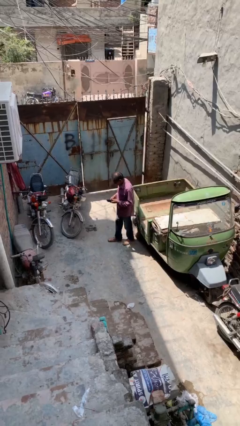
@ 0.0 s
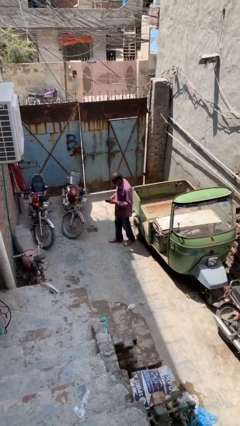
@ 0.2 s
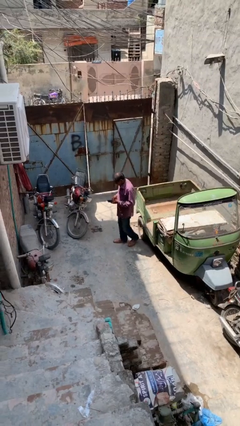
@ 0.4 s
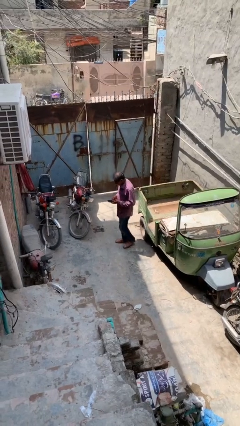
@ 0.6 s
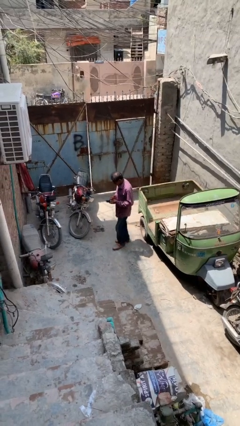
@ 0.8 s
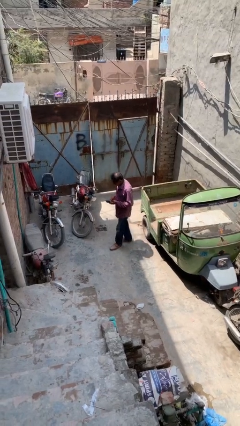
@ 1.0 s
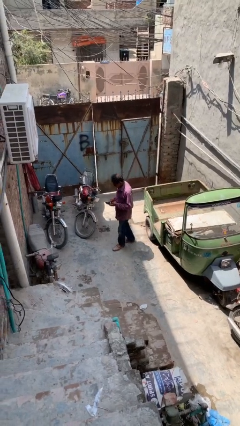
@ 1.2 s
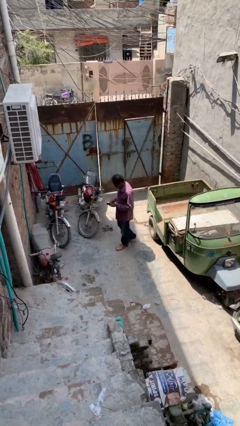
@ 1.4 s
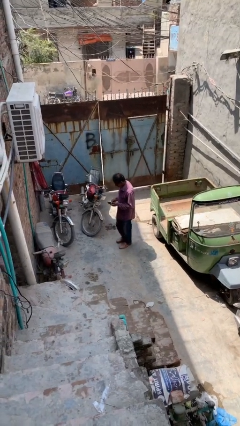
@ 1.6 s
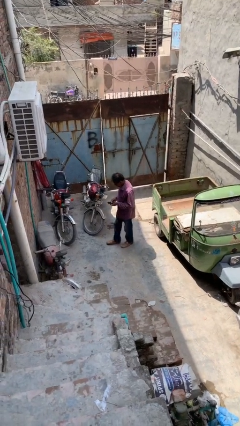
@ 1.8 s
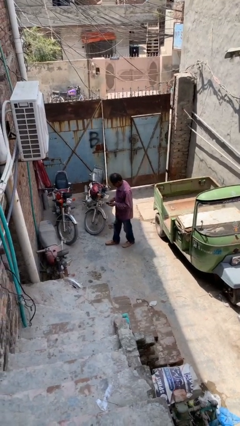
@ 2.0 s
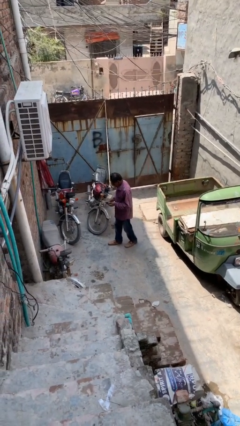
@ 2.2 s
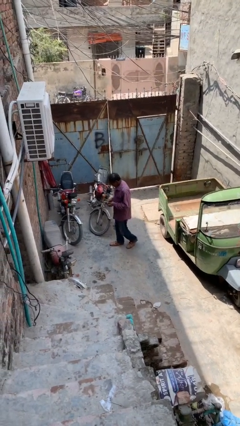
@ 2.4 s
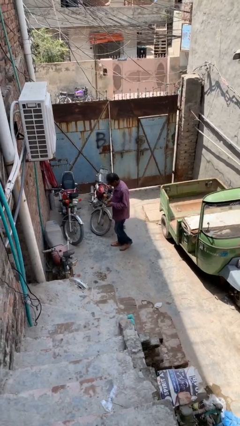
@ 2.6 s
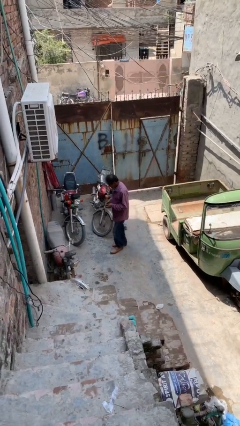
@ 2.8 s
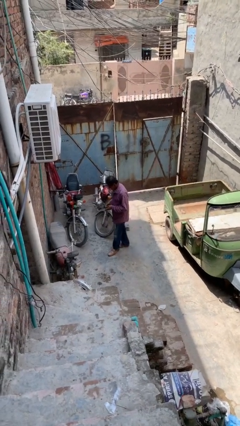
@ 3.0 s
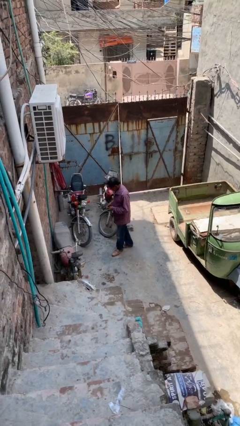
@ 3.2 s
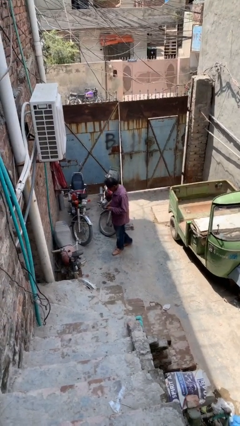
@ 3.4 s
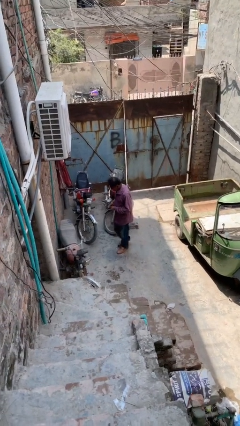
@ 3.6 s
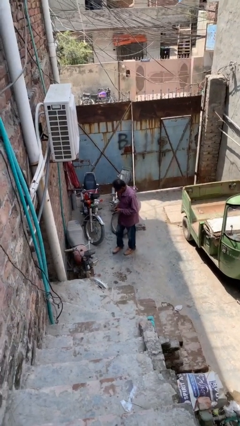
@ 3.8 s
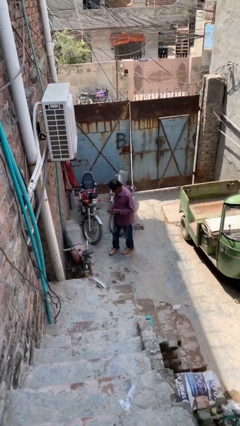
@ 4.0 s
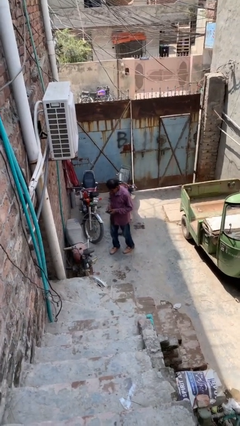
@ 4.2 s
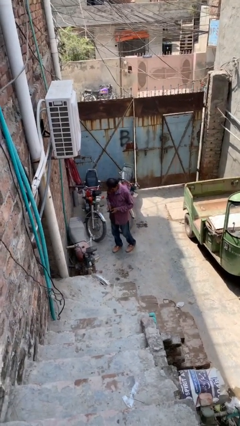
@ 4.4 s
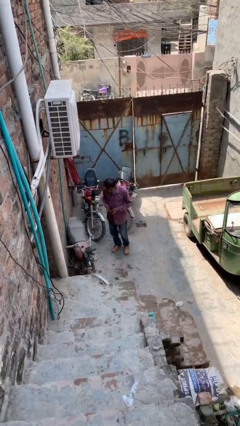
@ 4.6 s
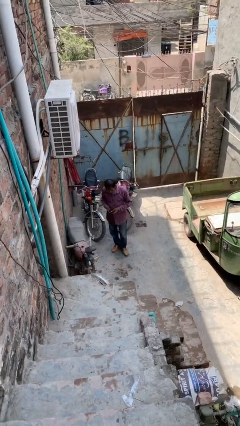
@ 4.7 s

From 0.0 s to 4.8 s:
person texts on phone

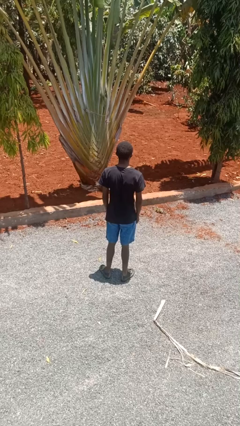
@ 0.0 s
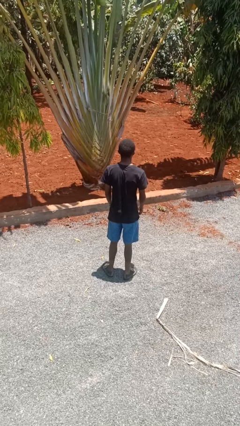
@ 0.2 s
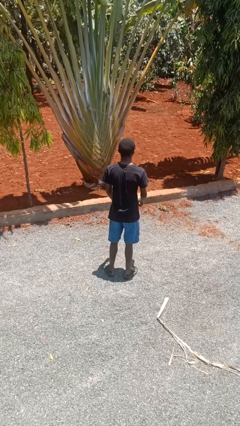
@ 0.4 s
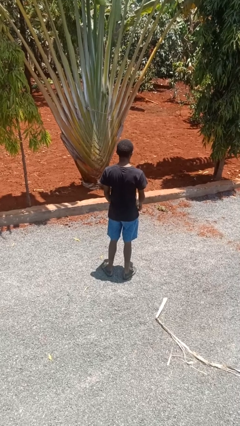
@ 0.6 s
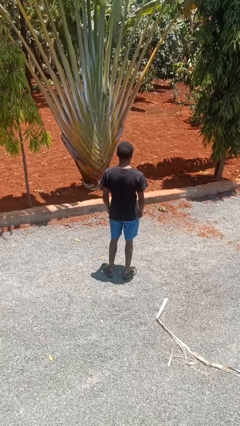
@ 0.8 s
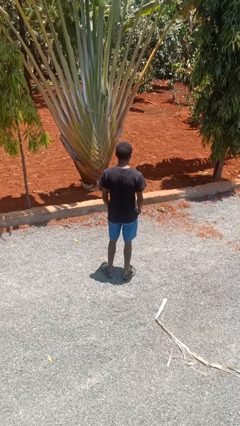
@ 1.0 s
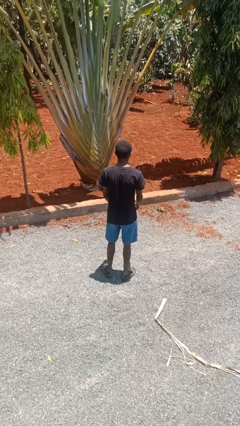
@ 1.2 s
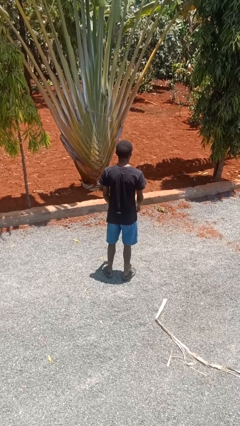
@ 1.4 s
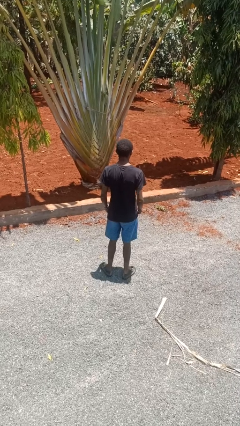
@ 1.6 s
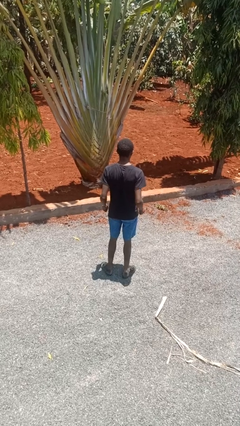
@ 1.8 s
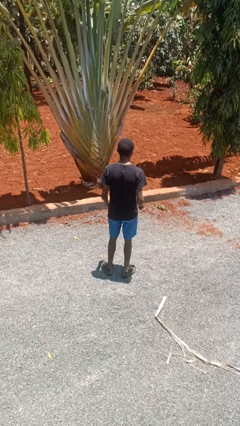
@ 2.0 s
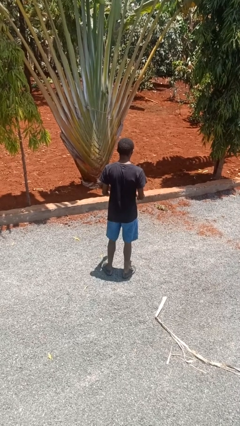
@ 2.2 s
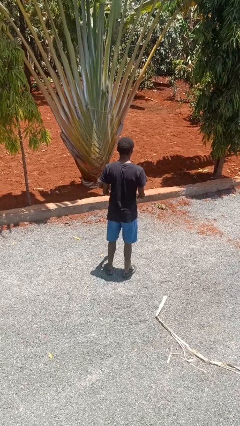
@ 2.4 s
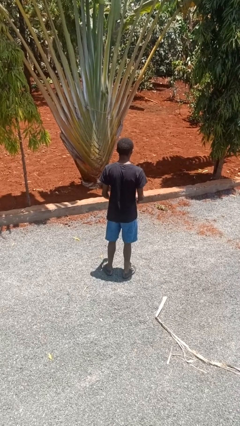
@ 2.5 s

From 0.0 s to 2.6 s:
person wiggles hips

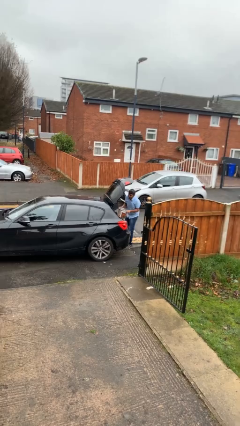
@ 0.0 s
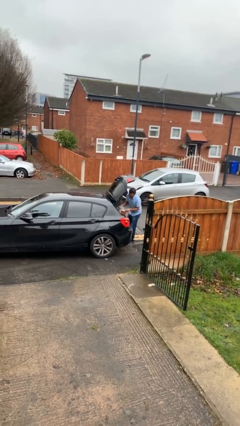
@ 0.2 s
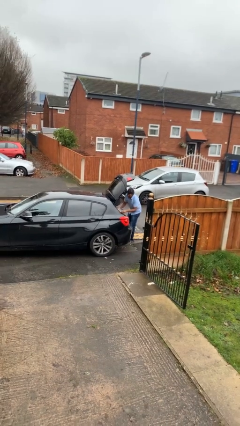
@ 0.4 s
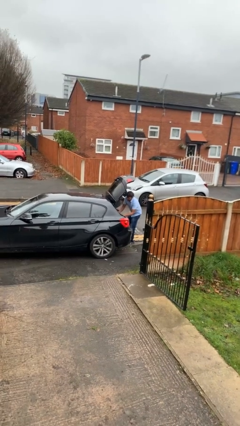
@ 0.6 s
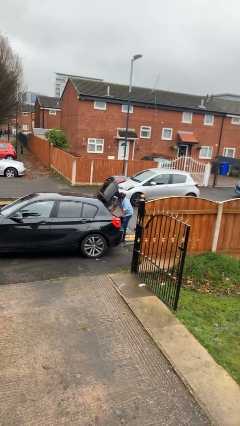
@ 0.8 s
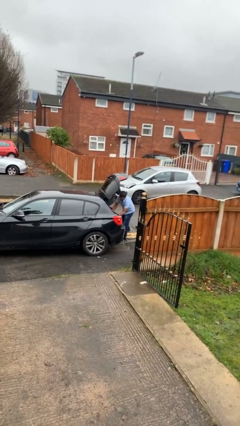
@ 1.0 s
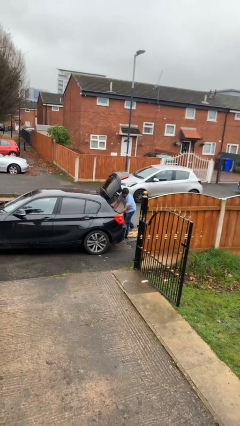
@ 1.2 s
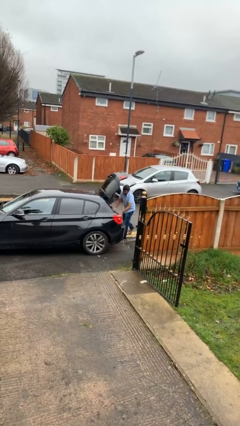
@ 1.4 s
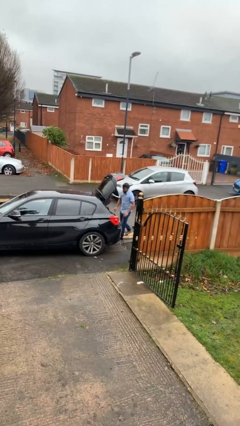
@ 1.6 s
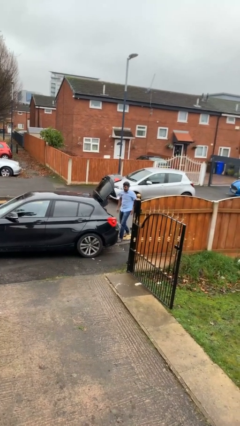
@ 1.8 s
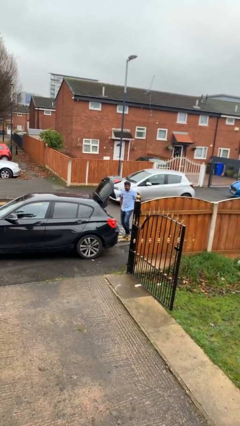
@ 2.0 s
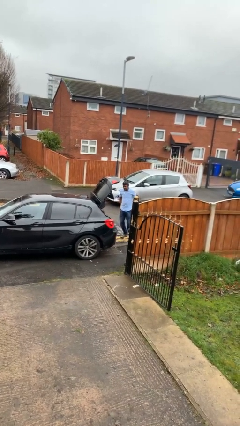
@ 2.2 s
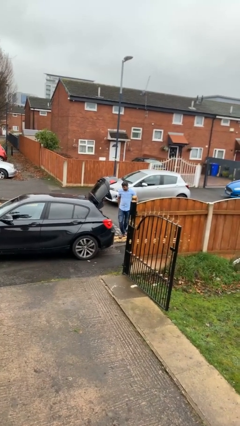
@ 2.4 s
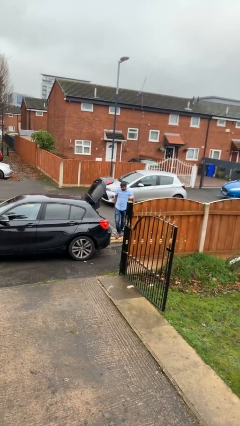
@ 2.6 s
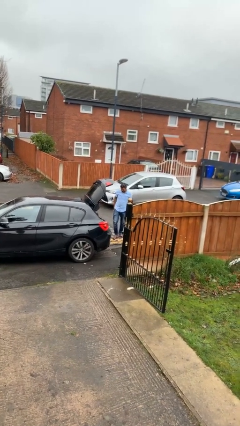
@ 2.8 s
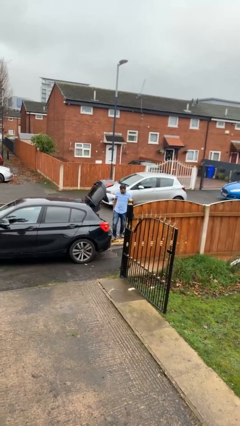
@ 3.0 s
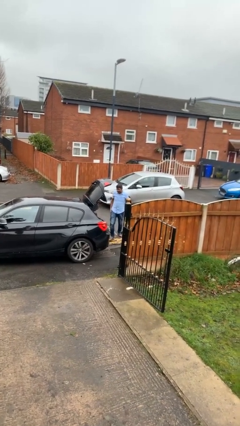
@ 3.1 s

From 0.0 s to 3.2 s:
person loads car

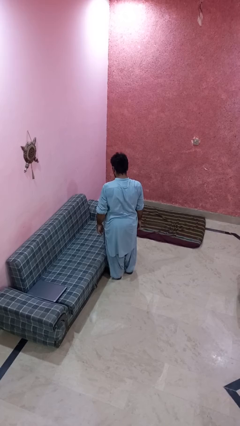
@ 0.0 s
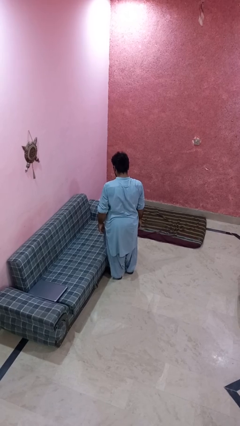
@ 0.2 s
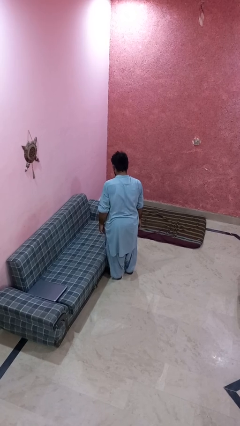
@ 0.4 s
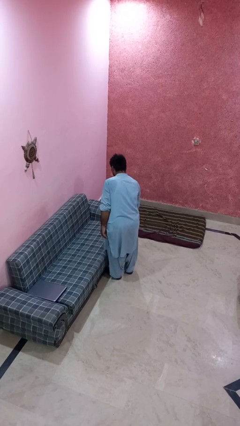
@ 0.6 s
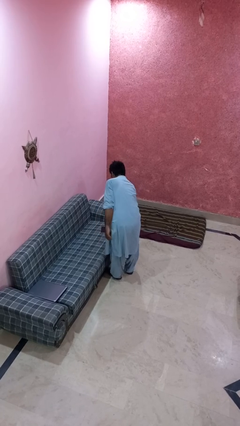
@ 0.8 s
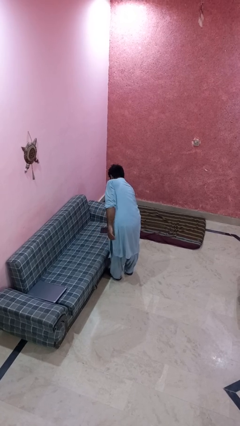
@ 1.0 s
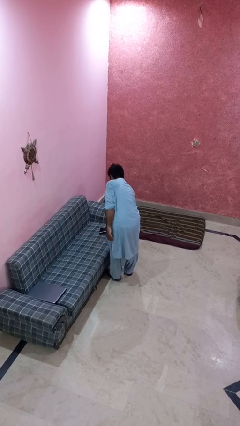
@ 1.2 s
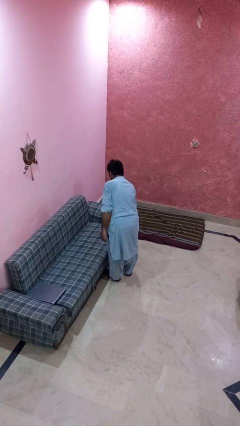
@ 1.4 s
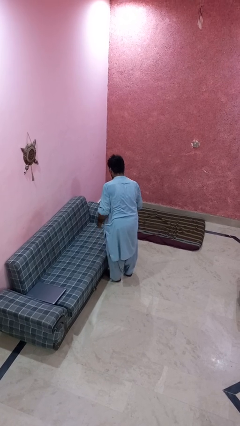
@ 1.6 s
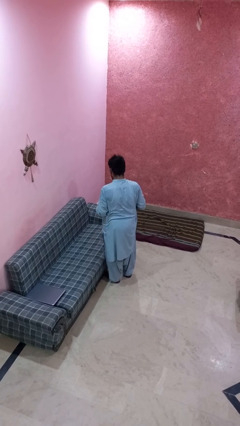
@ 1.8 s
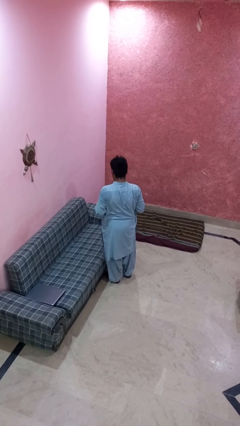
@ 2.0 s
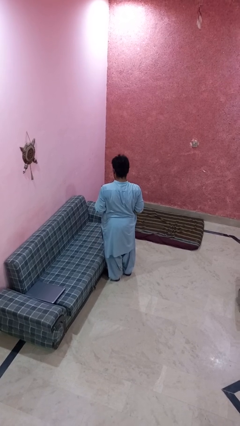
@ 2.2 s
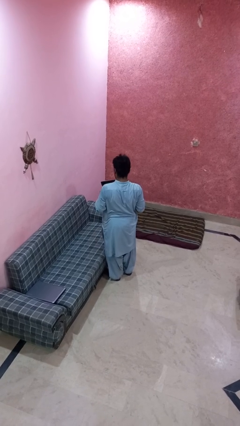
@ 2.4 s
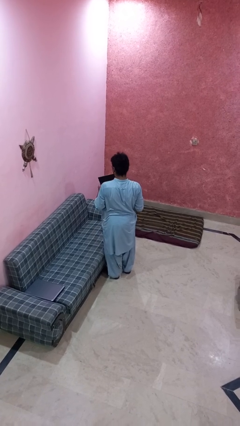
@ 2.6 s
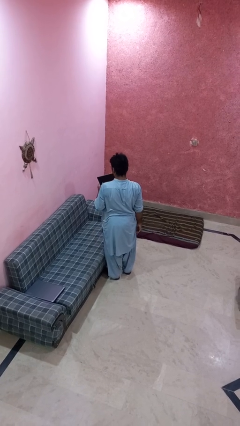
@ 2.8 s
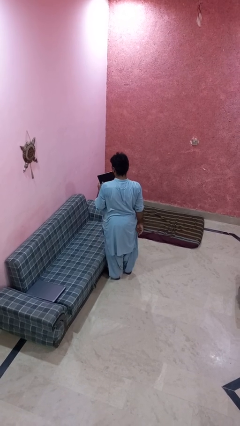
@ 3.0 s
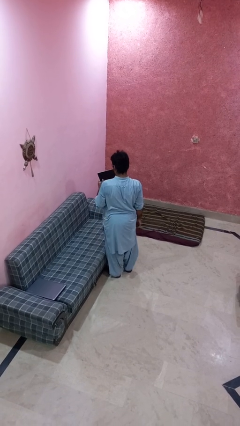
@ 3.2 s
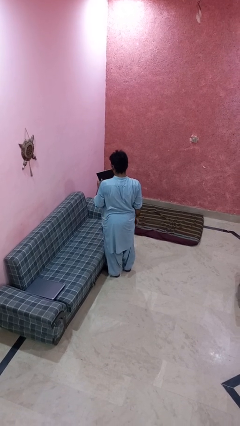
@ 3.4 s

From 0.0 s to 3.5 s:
person picks up object from couch

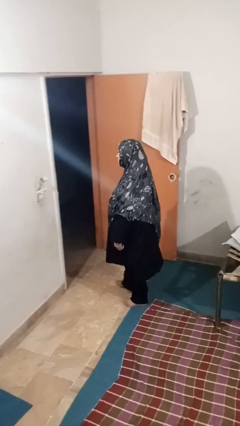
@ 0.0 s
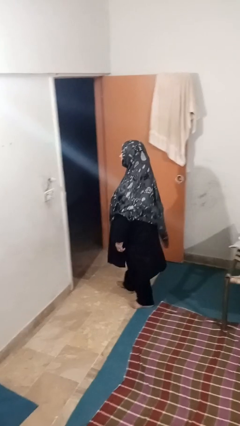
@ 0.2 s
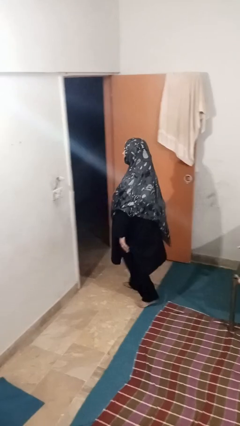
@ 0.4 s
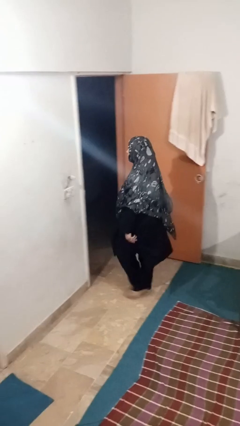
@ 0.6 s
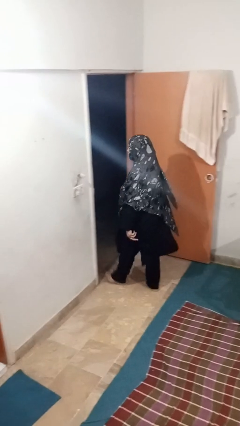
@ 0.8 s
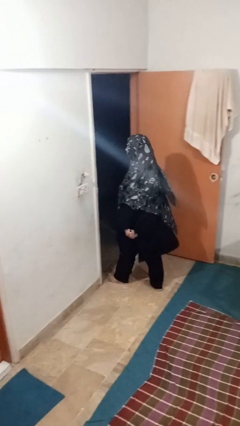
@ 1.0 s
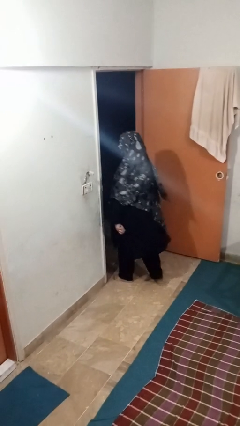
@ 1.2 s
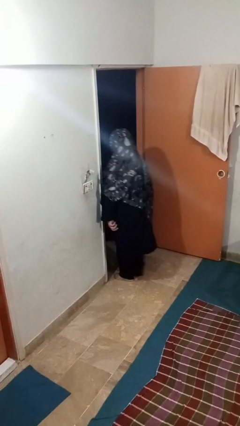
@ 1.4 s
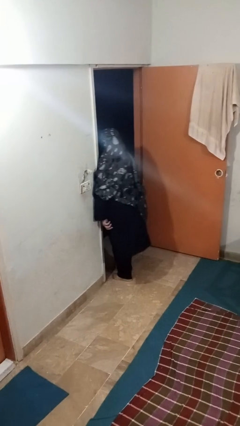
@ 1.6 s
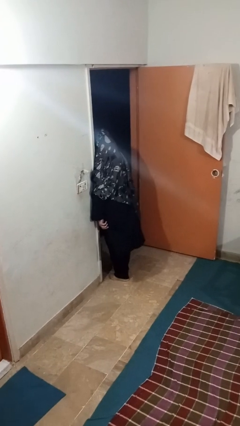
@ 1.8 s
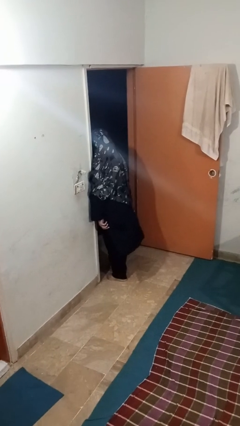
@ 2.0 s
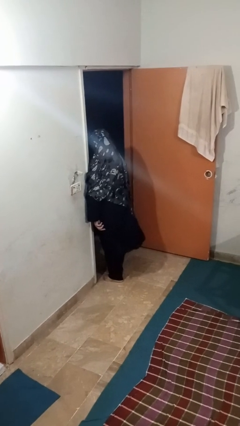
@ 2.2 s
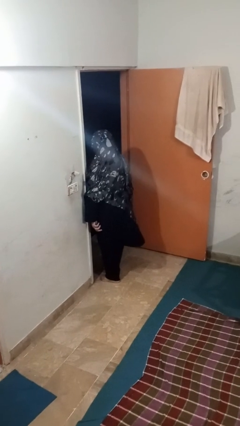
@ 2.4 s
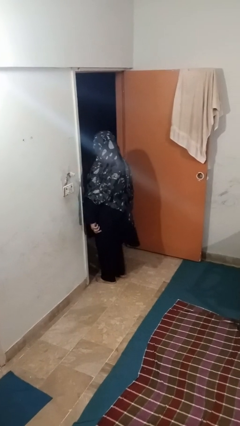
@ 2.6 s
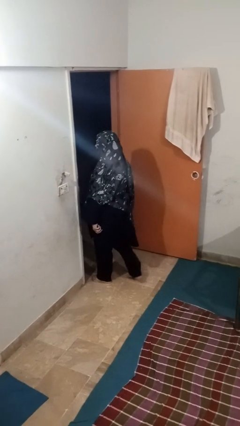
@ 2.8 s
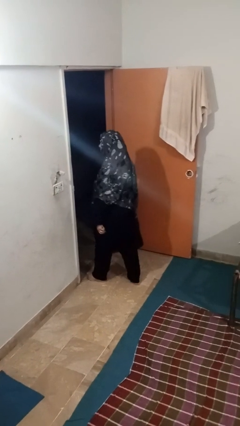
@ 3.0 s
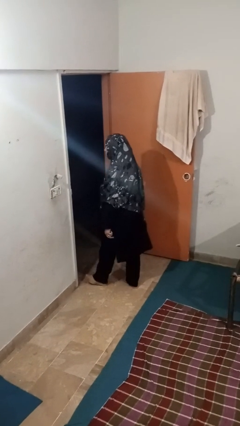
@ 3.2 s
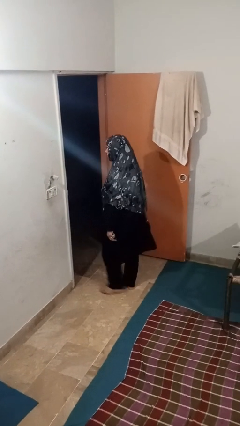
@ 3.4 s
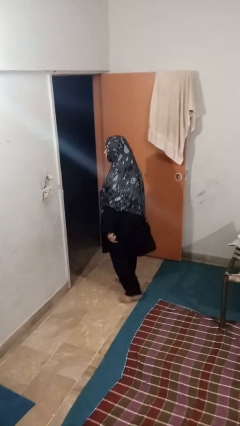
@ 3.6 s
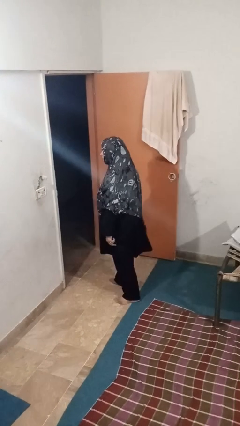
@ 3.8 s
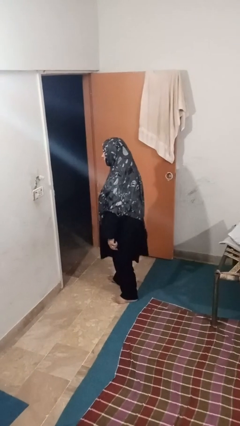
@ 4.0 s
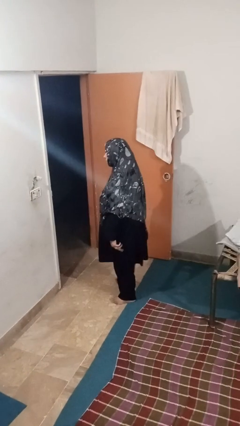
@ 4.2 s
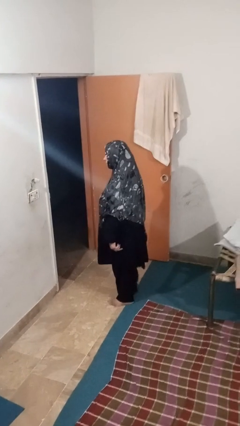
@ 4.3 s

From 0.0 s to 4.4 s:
person bumps into wall
